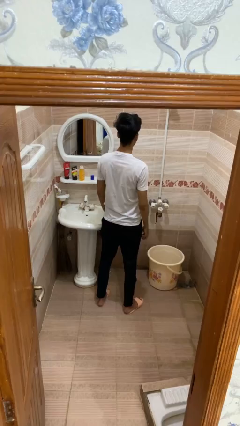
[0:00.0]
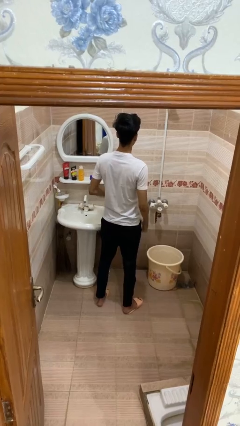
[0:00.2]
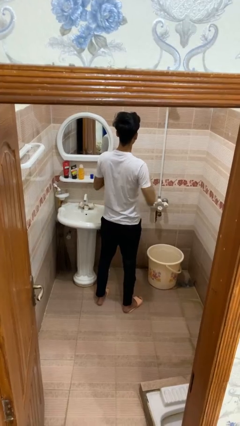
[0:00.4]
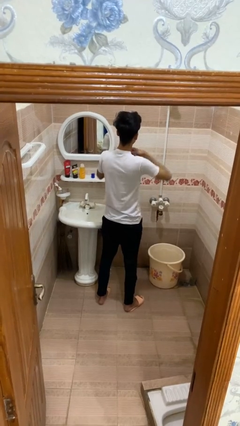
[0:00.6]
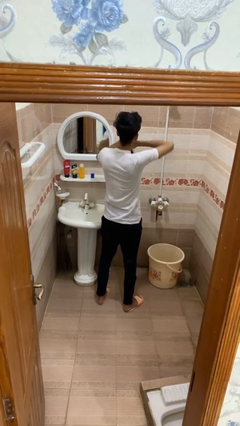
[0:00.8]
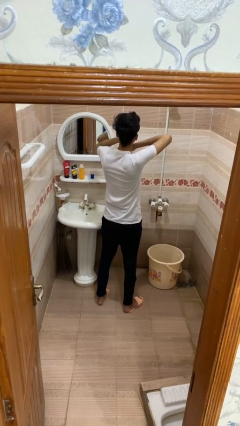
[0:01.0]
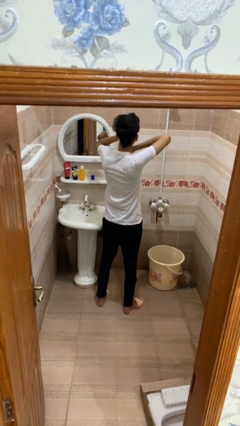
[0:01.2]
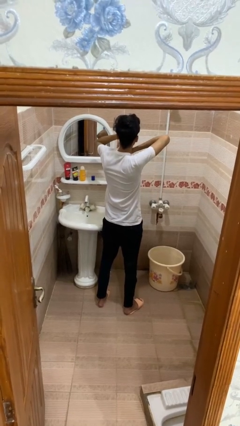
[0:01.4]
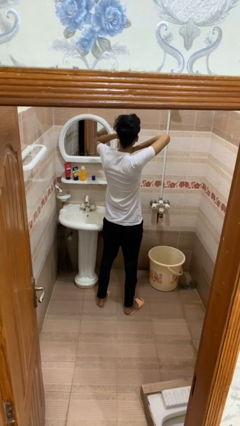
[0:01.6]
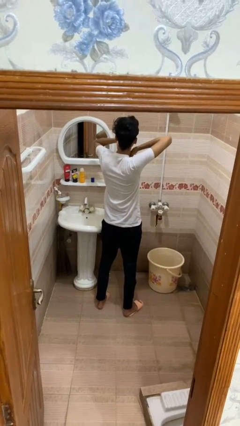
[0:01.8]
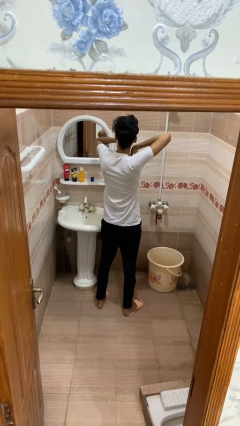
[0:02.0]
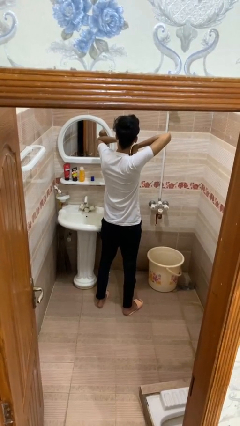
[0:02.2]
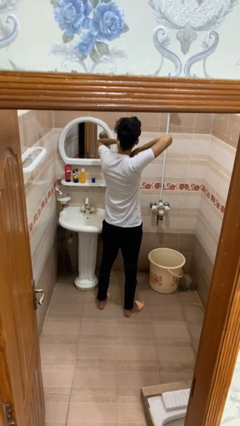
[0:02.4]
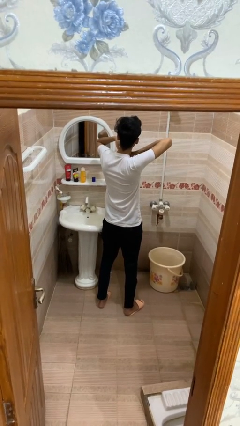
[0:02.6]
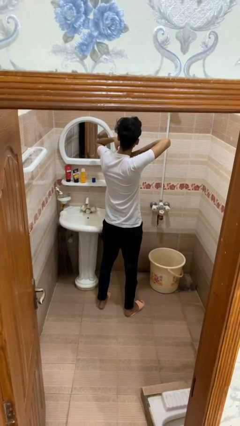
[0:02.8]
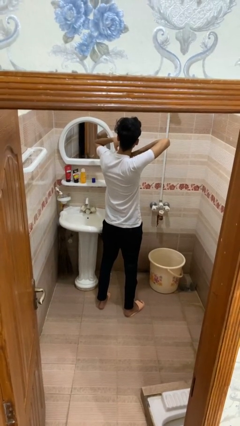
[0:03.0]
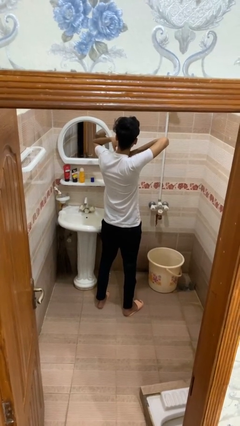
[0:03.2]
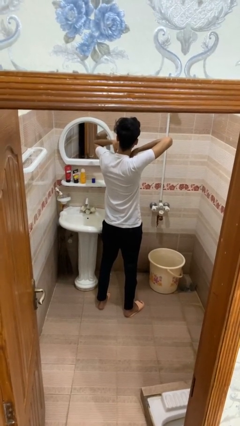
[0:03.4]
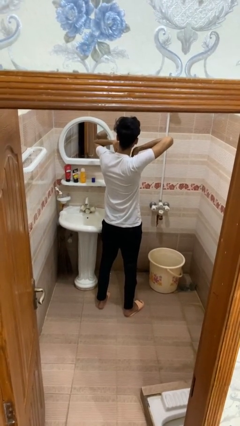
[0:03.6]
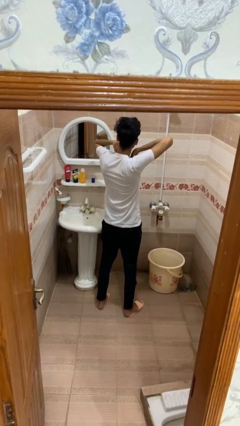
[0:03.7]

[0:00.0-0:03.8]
person applies deodorant

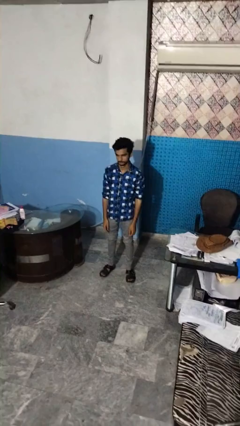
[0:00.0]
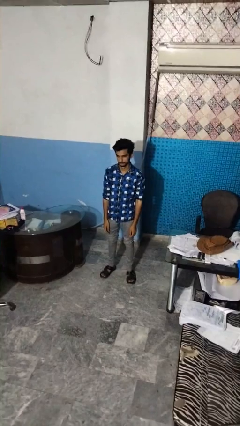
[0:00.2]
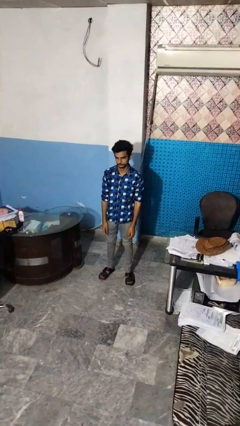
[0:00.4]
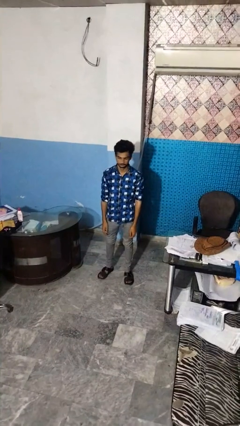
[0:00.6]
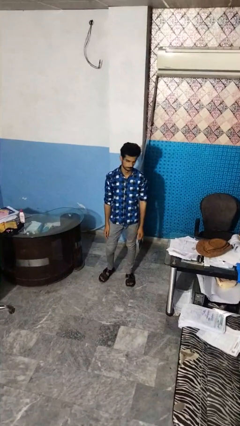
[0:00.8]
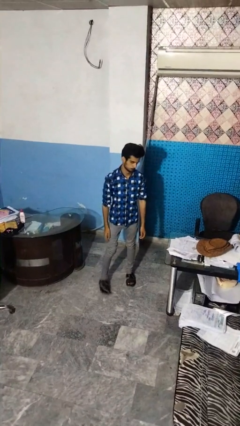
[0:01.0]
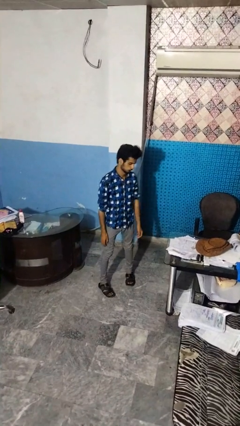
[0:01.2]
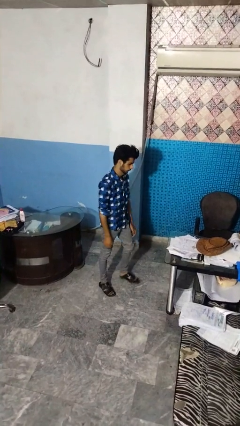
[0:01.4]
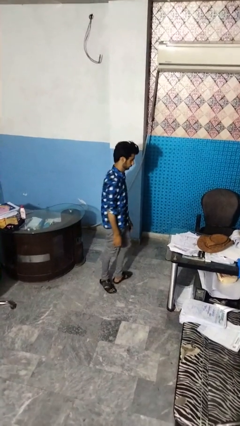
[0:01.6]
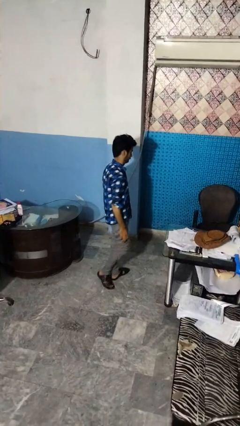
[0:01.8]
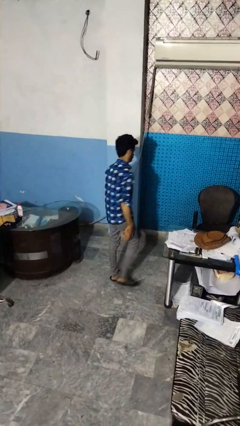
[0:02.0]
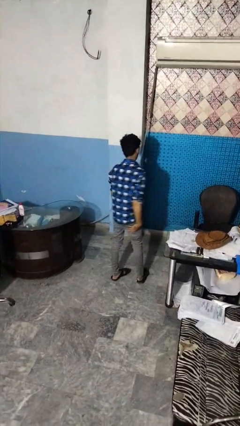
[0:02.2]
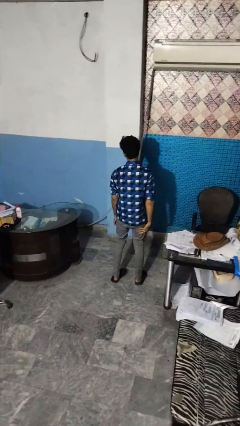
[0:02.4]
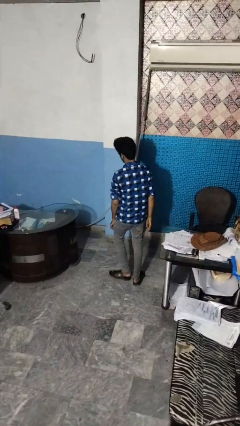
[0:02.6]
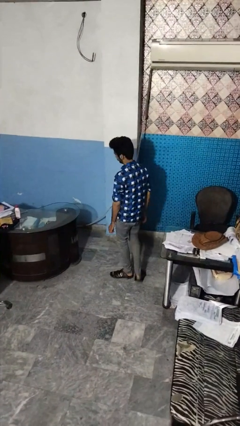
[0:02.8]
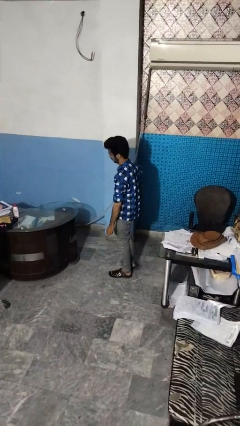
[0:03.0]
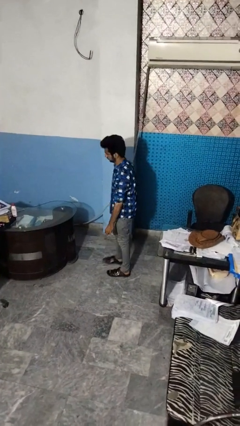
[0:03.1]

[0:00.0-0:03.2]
person twirls

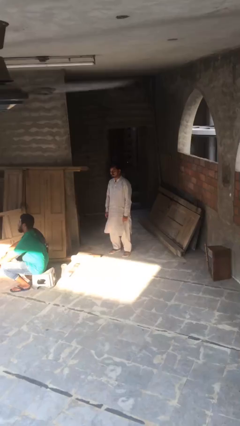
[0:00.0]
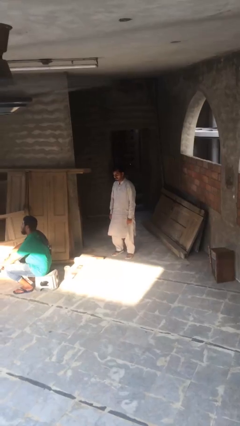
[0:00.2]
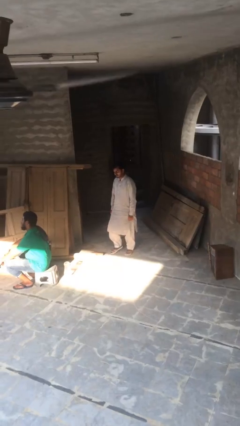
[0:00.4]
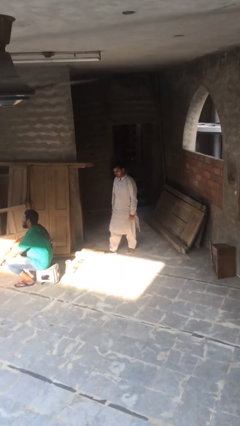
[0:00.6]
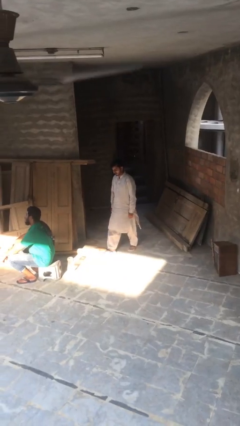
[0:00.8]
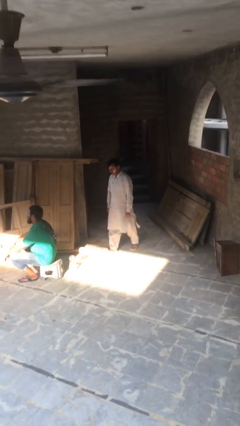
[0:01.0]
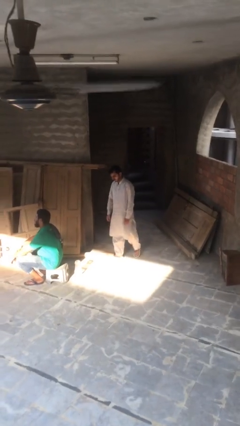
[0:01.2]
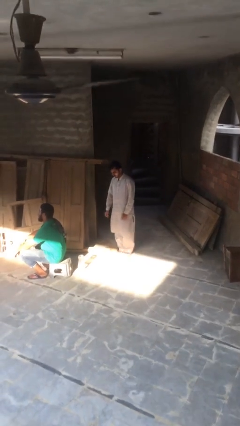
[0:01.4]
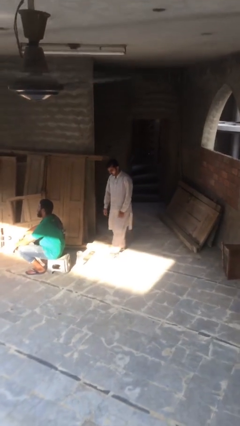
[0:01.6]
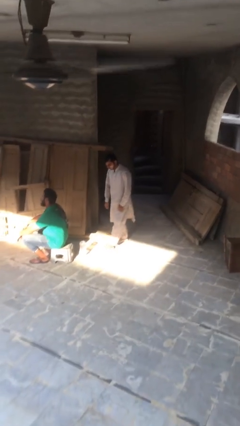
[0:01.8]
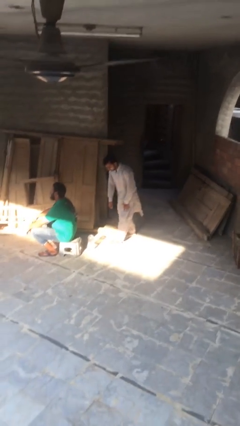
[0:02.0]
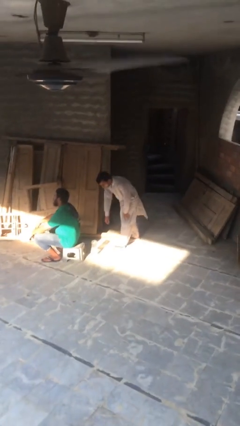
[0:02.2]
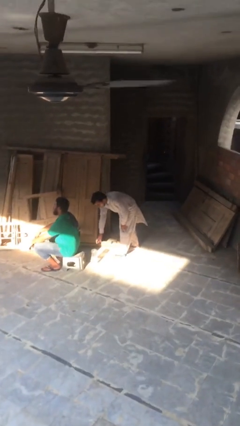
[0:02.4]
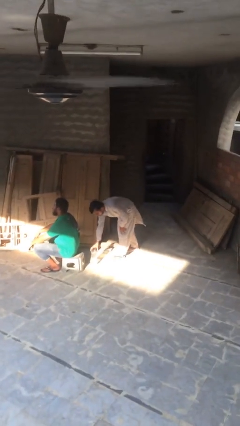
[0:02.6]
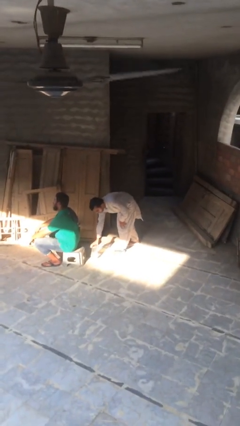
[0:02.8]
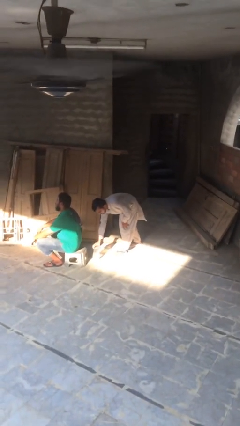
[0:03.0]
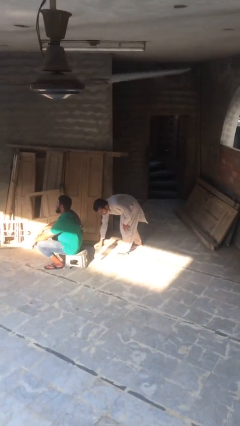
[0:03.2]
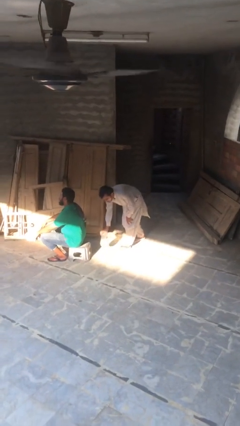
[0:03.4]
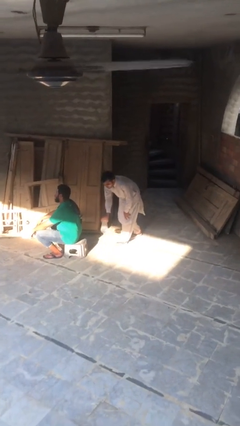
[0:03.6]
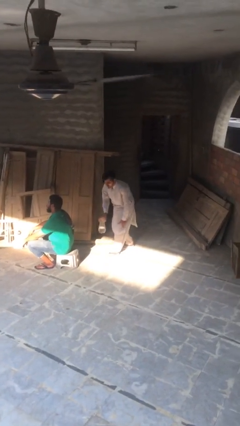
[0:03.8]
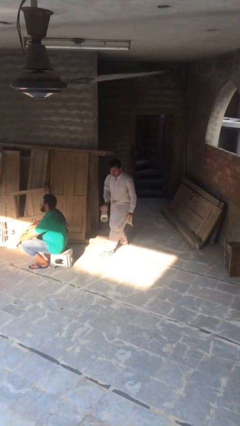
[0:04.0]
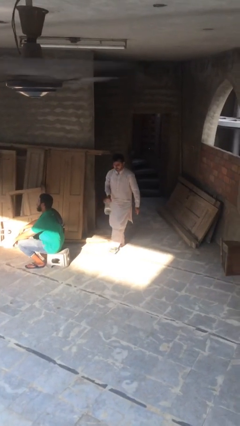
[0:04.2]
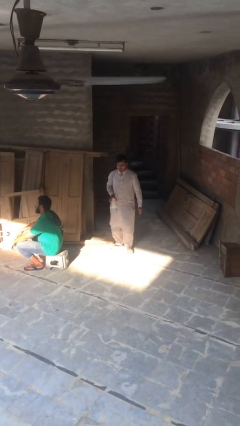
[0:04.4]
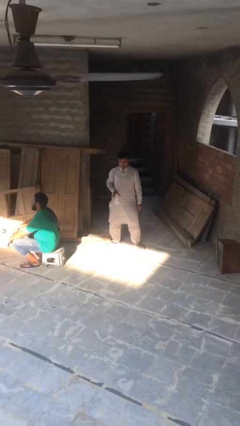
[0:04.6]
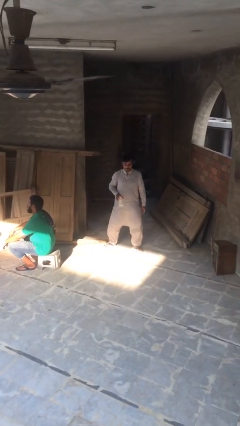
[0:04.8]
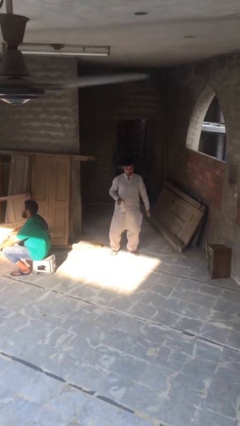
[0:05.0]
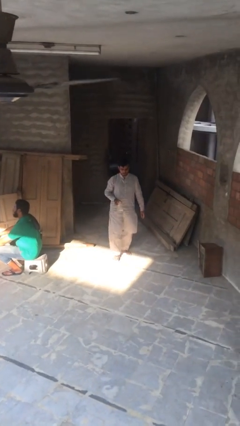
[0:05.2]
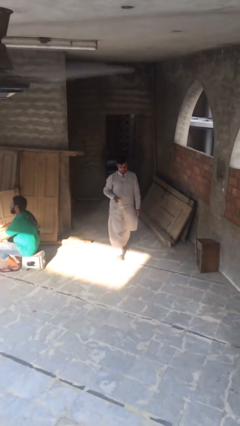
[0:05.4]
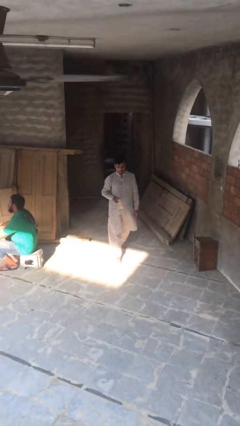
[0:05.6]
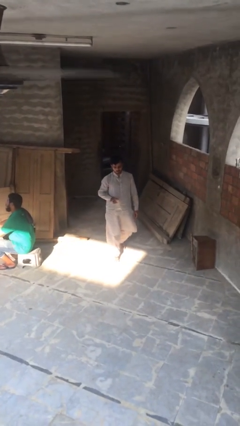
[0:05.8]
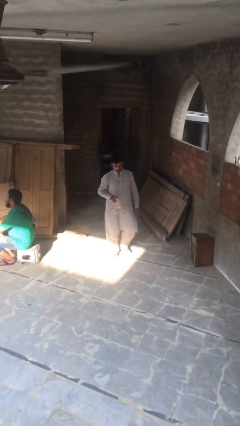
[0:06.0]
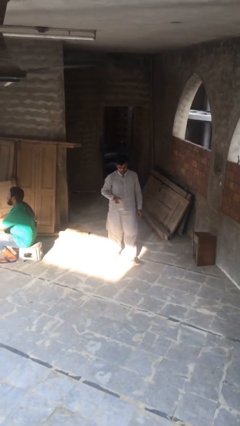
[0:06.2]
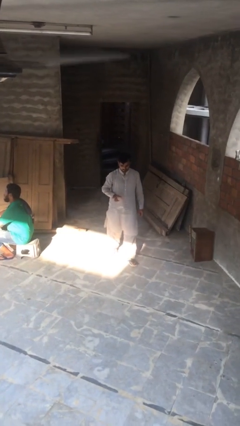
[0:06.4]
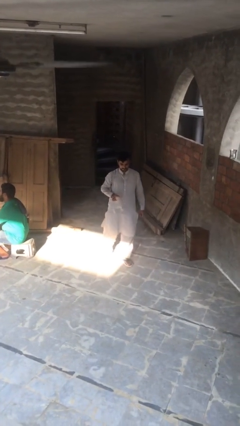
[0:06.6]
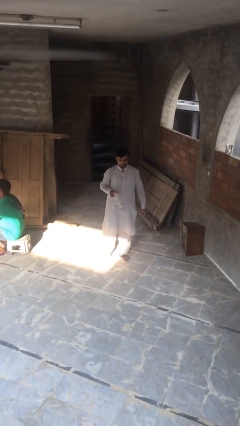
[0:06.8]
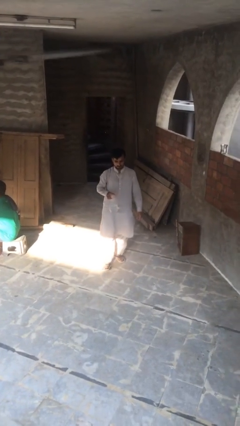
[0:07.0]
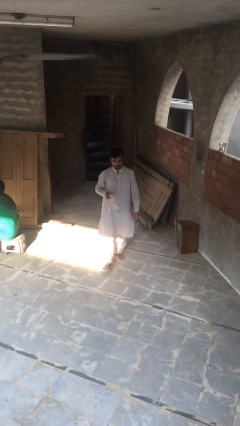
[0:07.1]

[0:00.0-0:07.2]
person steals object from person

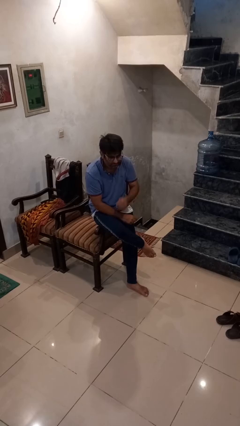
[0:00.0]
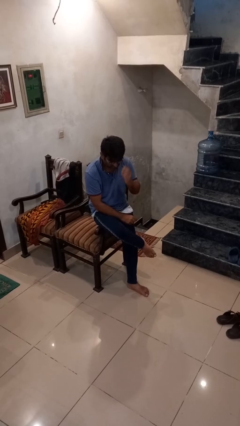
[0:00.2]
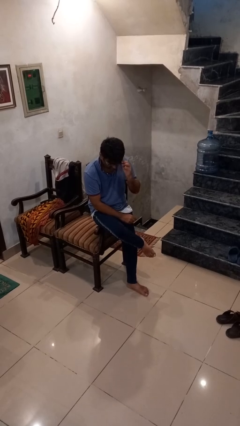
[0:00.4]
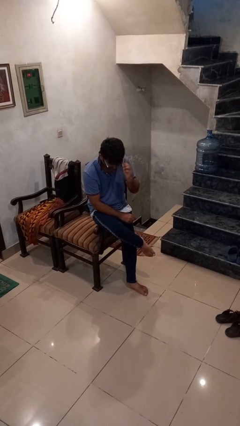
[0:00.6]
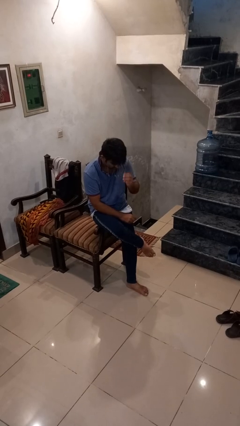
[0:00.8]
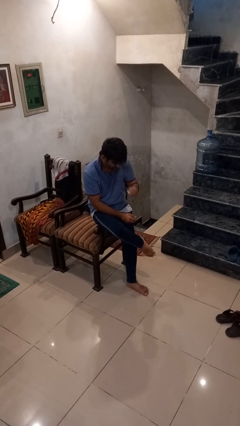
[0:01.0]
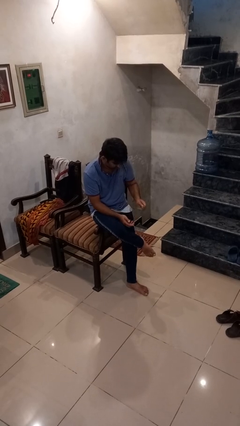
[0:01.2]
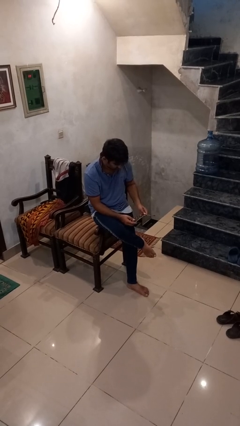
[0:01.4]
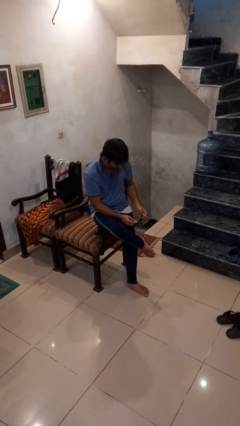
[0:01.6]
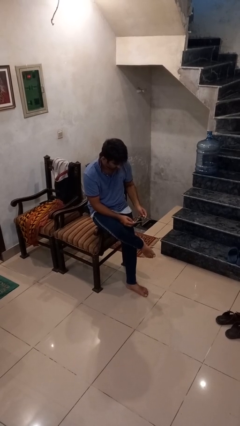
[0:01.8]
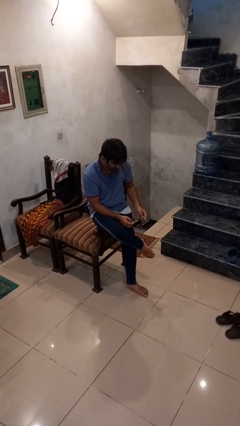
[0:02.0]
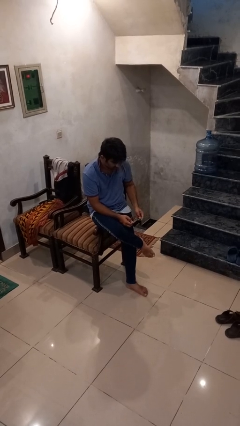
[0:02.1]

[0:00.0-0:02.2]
person takes off glasses

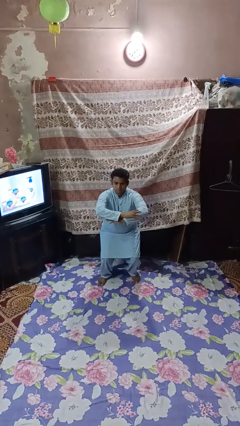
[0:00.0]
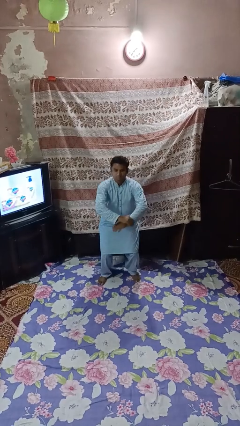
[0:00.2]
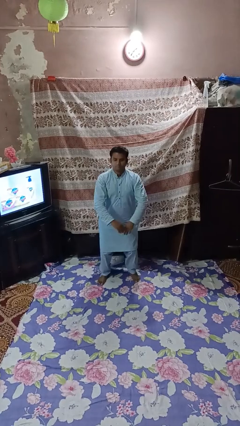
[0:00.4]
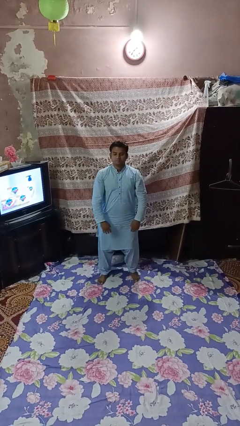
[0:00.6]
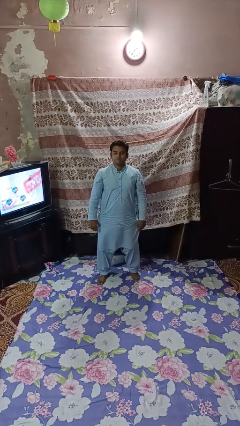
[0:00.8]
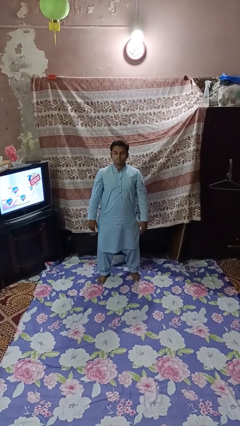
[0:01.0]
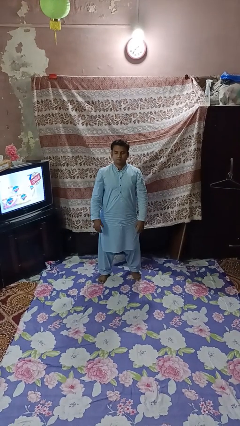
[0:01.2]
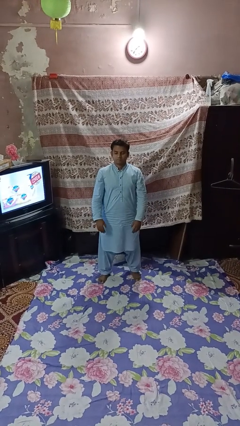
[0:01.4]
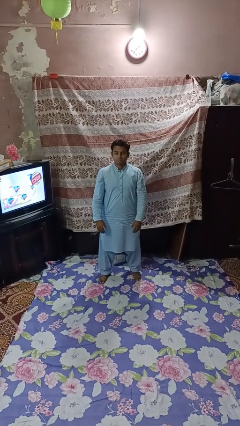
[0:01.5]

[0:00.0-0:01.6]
person stands up
